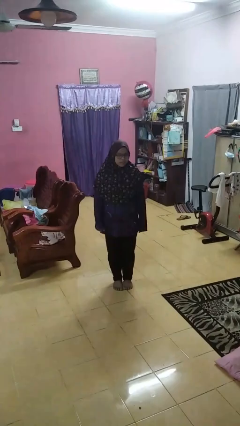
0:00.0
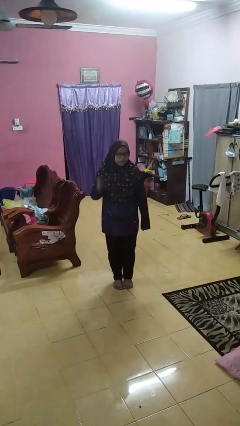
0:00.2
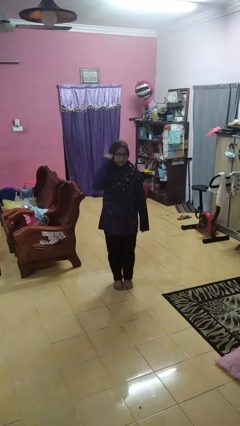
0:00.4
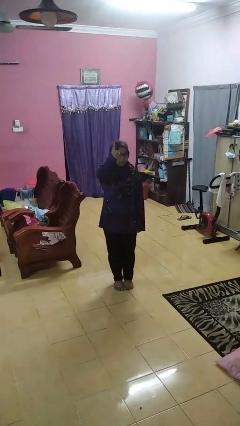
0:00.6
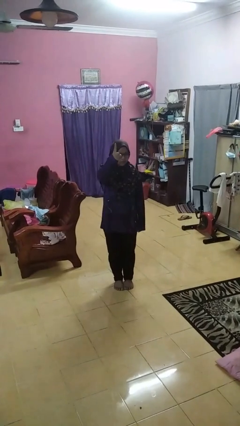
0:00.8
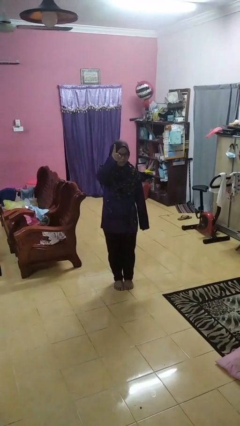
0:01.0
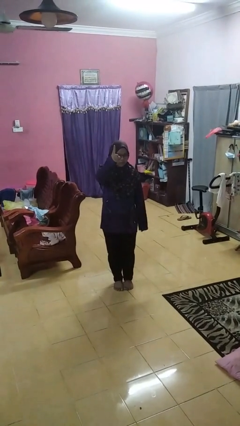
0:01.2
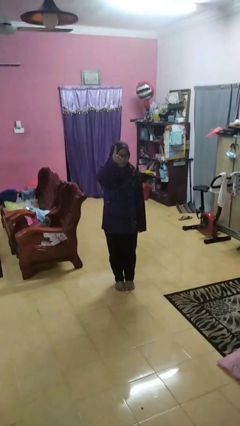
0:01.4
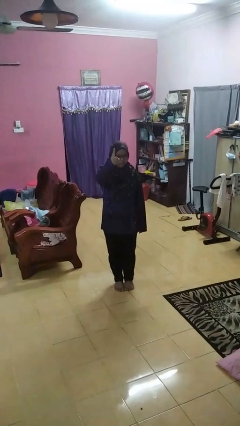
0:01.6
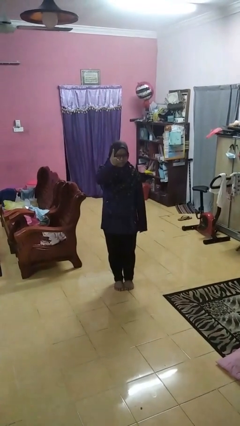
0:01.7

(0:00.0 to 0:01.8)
person gestures number one

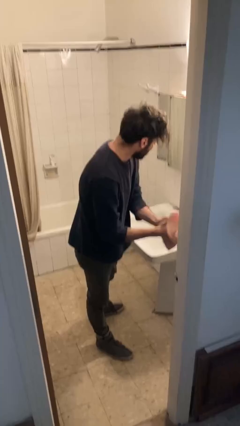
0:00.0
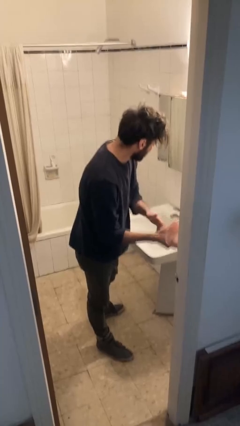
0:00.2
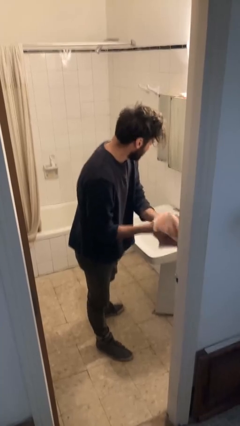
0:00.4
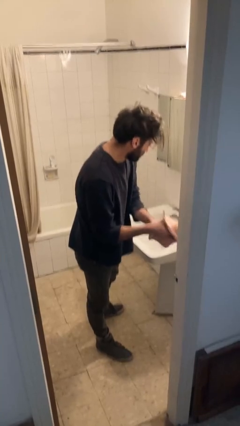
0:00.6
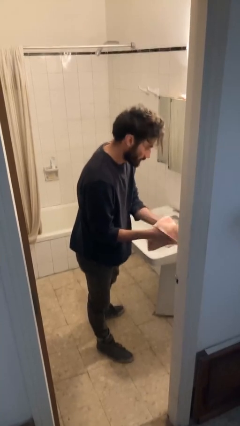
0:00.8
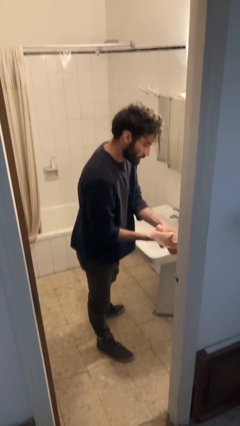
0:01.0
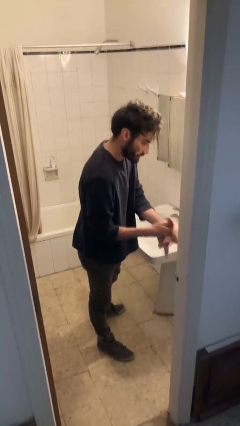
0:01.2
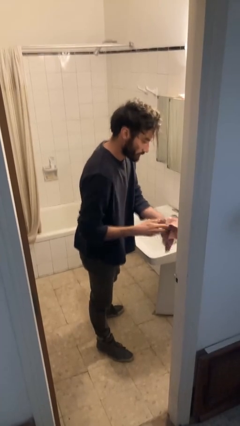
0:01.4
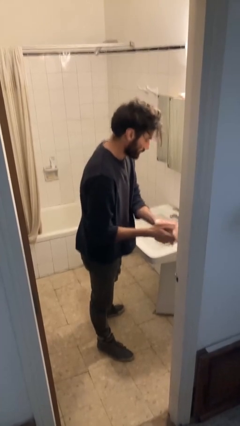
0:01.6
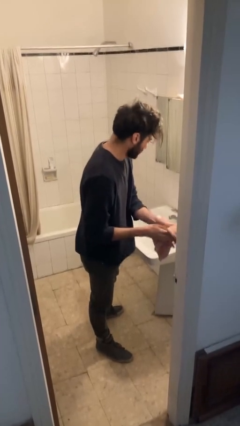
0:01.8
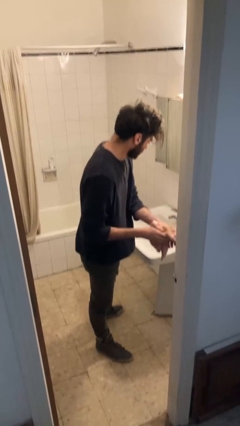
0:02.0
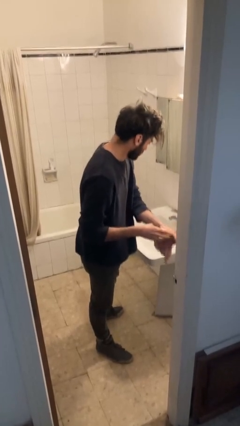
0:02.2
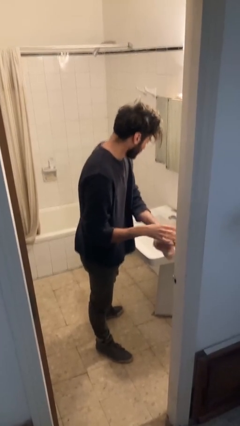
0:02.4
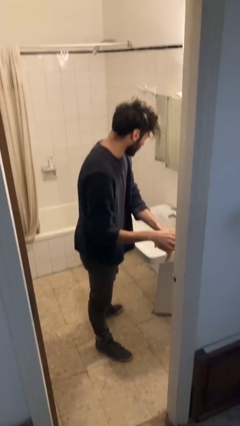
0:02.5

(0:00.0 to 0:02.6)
person dries hands with towel

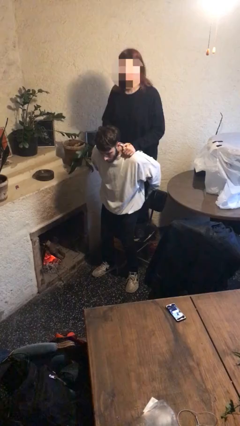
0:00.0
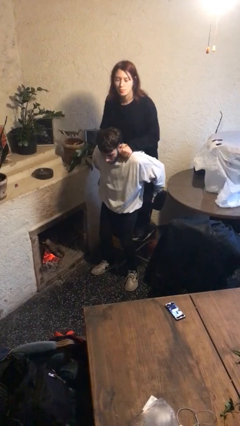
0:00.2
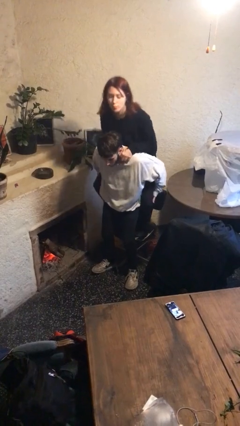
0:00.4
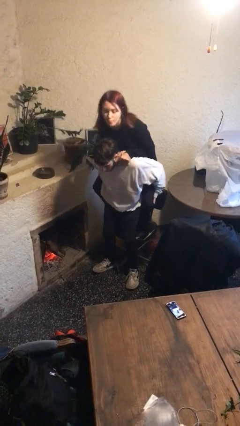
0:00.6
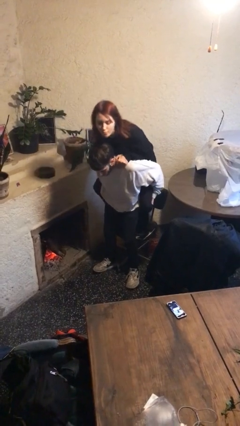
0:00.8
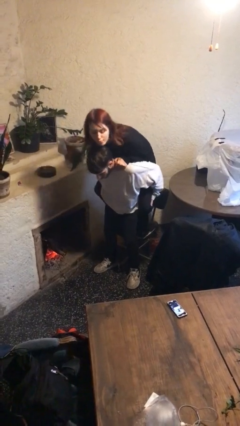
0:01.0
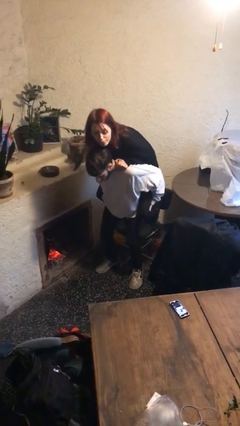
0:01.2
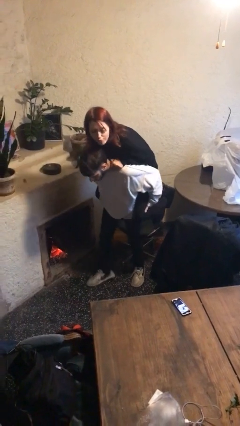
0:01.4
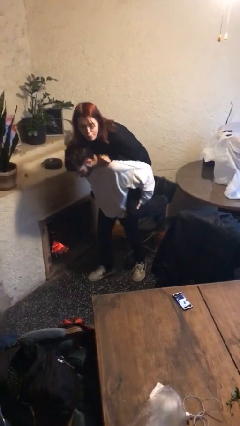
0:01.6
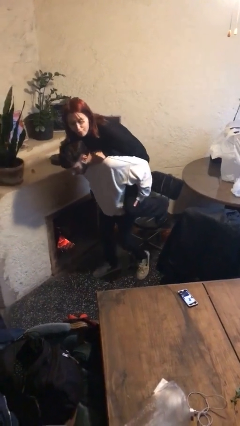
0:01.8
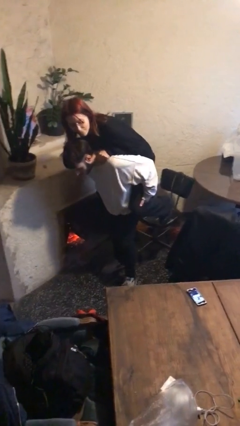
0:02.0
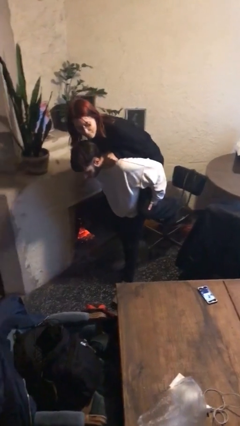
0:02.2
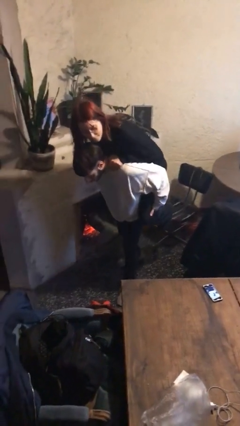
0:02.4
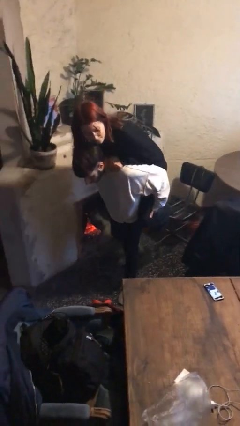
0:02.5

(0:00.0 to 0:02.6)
person carries person over shoulder

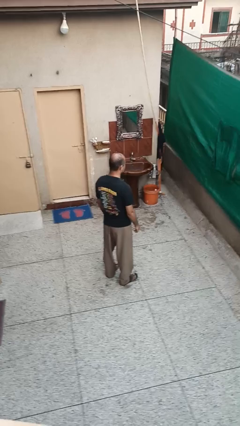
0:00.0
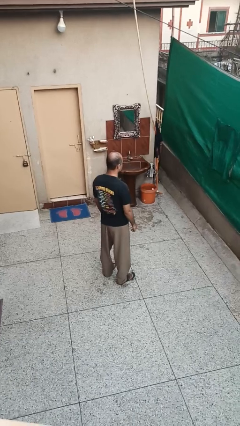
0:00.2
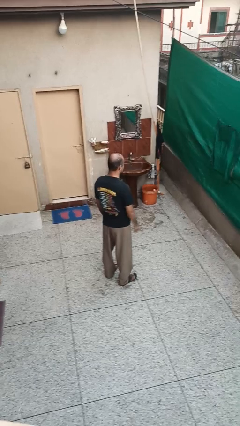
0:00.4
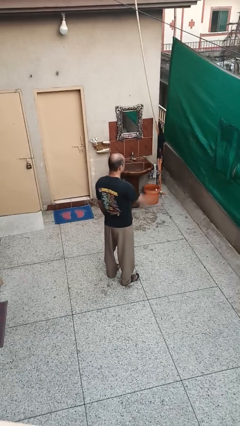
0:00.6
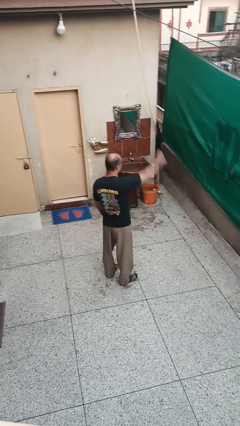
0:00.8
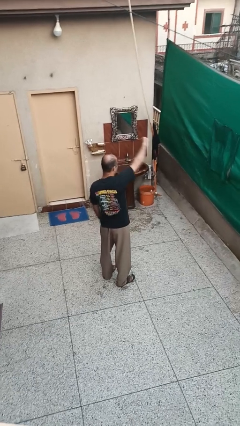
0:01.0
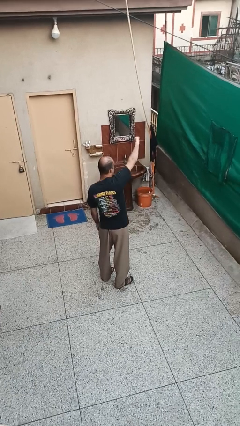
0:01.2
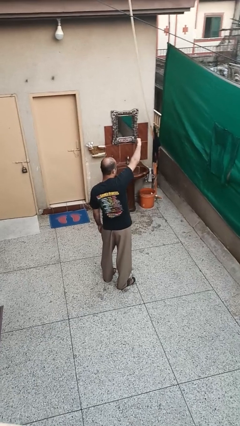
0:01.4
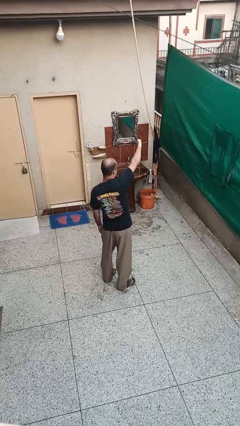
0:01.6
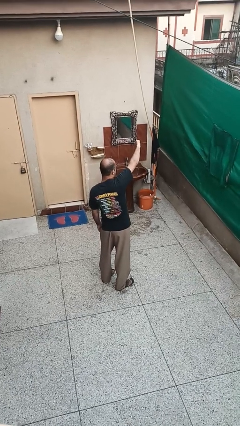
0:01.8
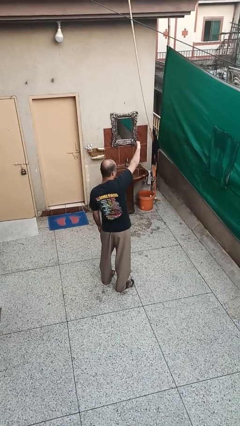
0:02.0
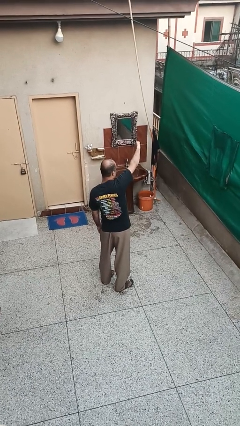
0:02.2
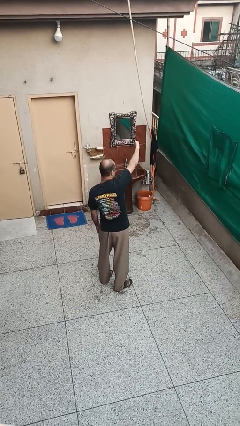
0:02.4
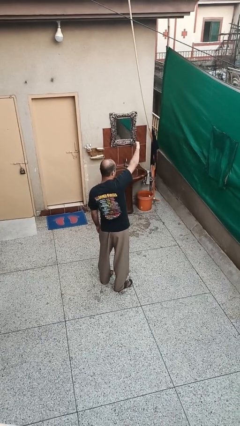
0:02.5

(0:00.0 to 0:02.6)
person gestures thumbs down

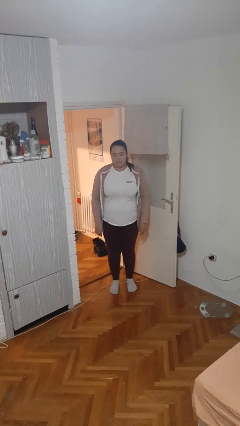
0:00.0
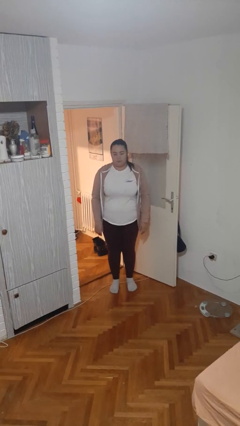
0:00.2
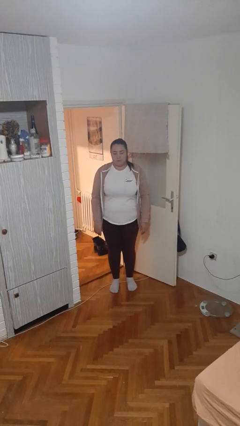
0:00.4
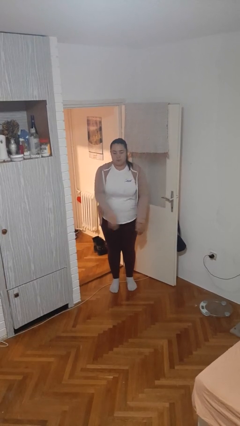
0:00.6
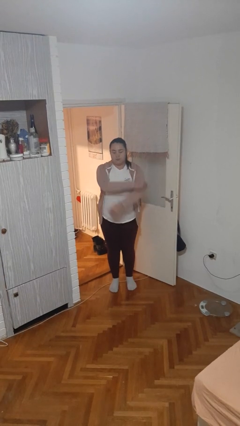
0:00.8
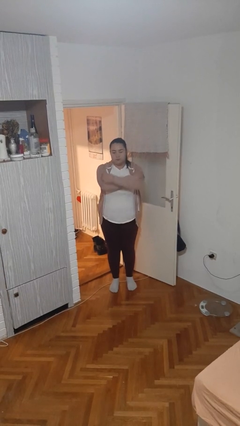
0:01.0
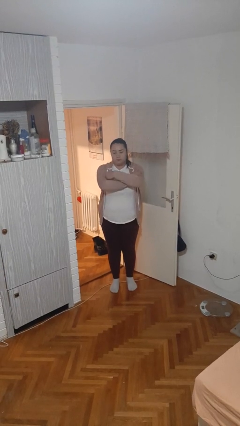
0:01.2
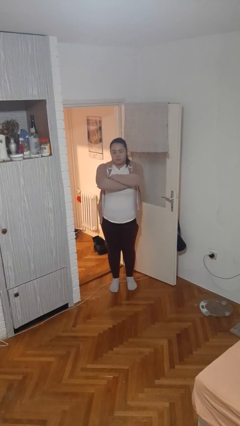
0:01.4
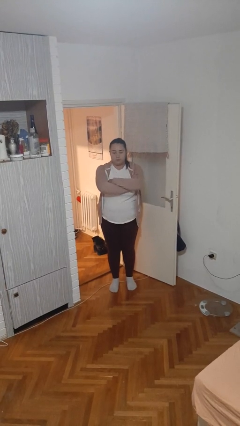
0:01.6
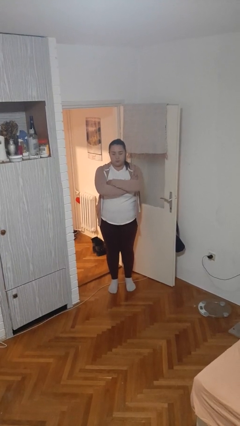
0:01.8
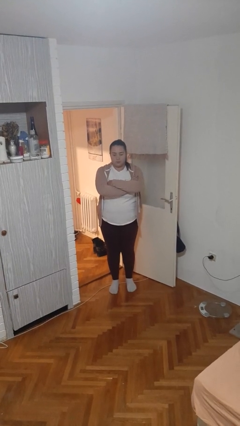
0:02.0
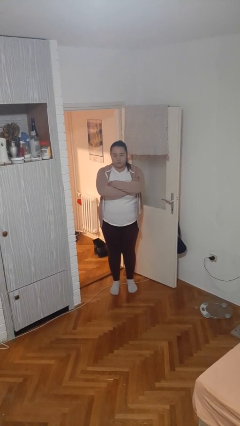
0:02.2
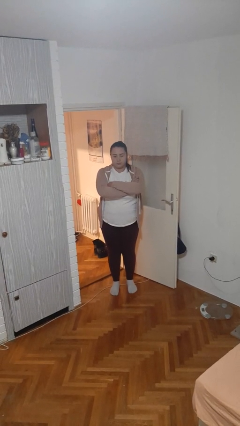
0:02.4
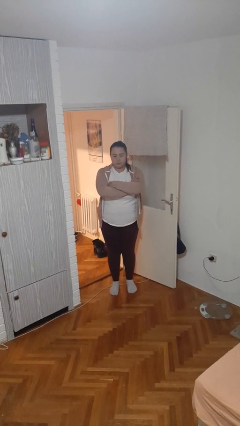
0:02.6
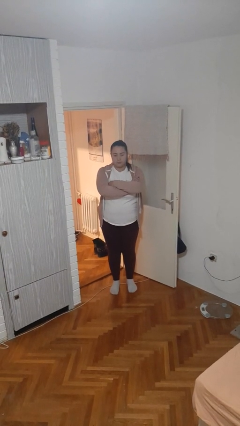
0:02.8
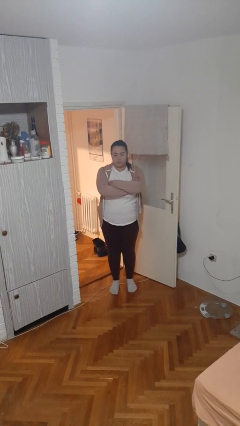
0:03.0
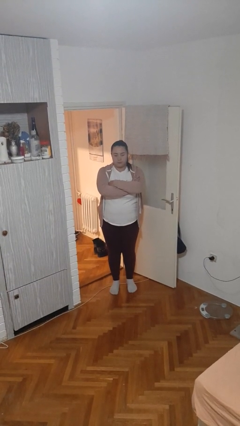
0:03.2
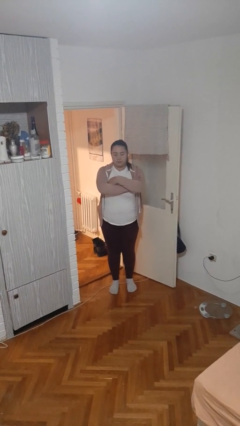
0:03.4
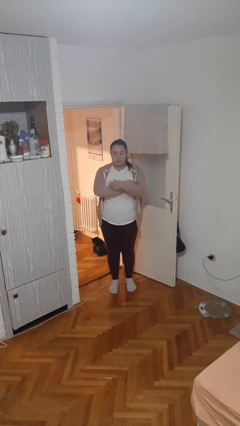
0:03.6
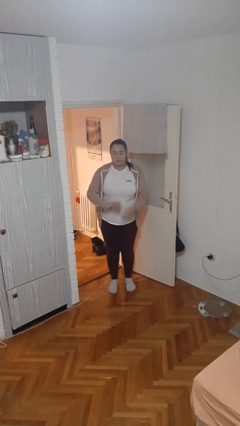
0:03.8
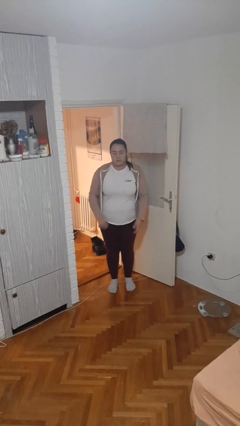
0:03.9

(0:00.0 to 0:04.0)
person crosses arms

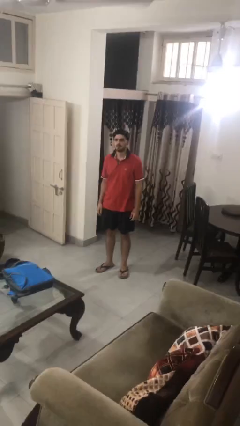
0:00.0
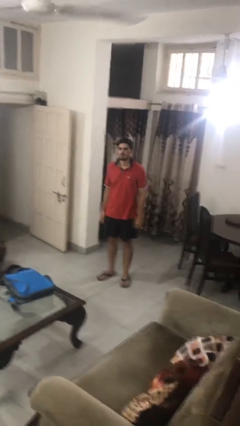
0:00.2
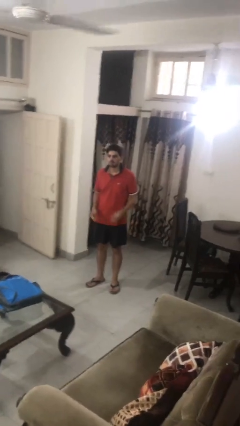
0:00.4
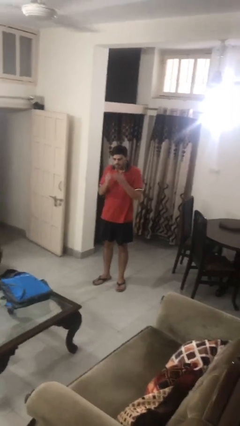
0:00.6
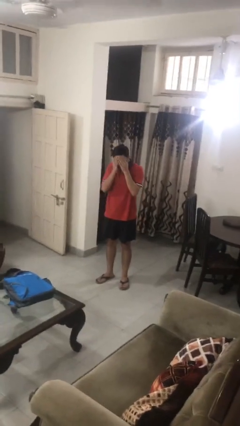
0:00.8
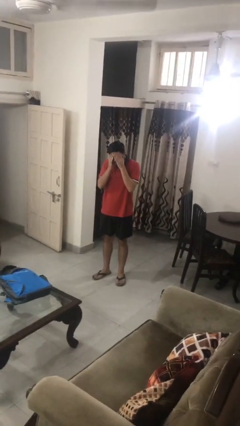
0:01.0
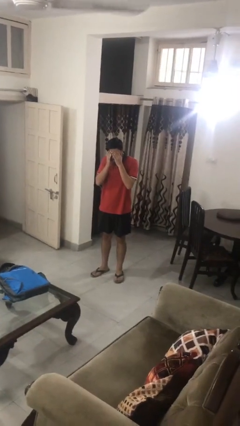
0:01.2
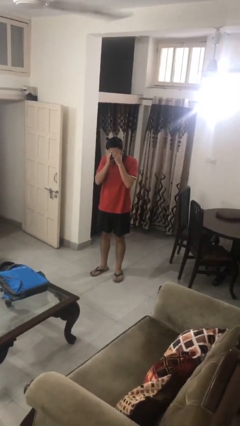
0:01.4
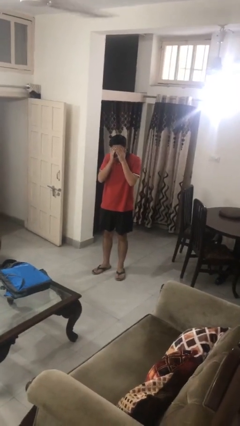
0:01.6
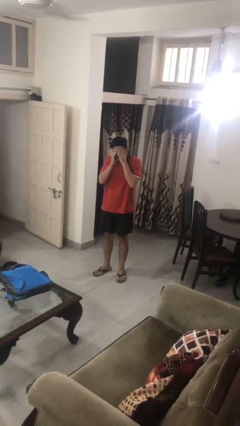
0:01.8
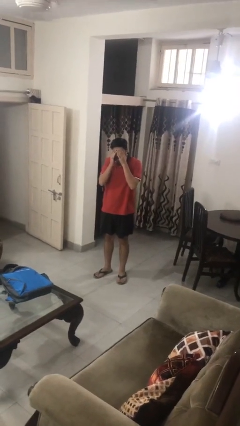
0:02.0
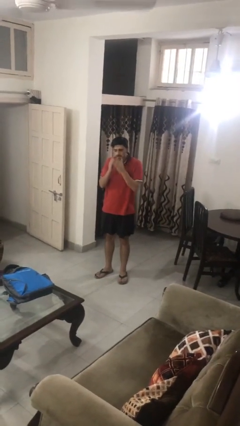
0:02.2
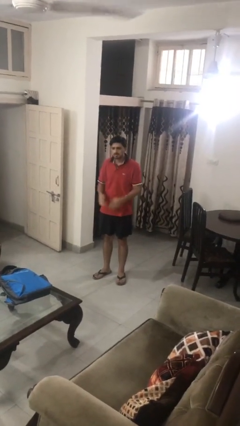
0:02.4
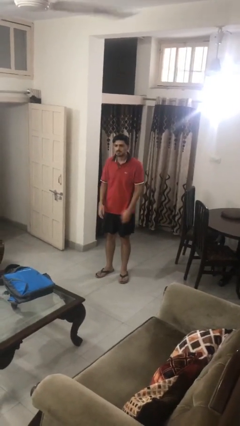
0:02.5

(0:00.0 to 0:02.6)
person covers face with hands

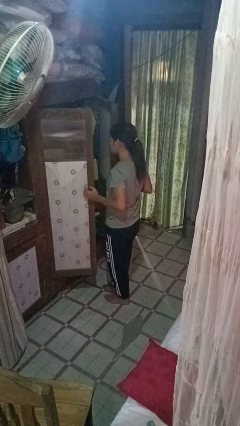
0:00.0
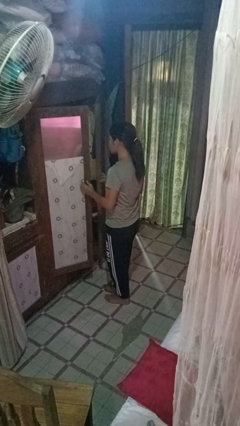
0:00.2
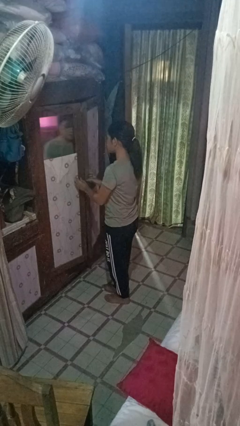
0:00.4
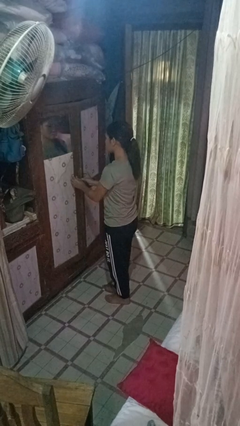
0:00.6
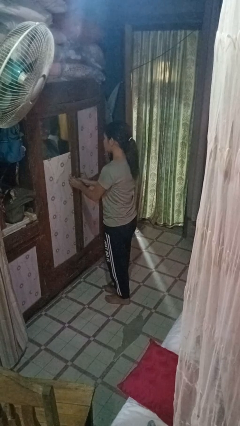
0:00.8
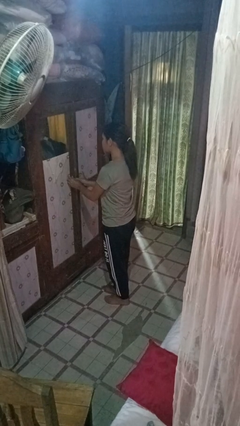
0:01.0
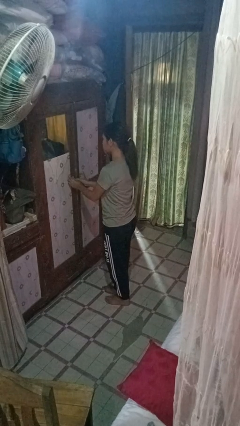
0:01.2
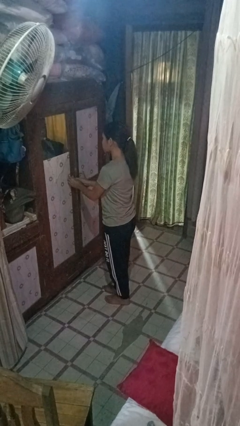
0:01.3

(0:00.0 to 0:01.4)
person closes closet door
